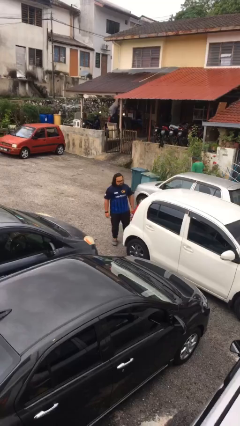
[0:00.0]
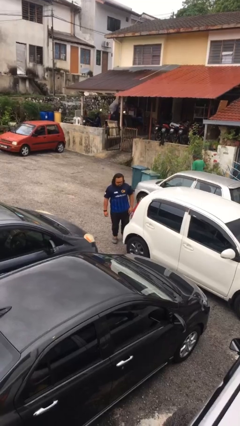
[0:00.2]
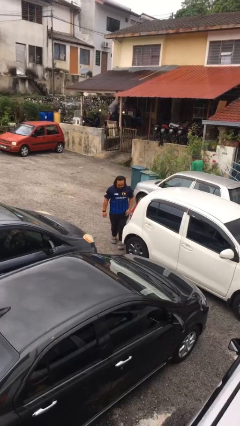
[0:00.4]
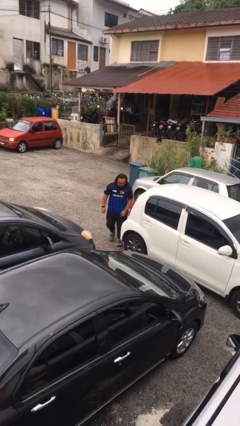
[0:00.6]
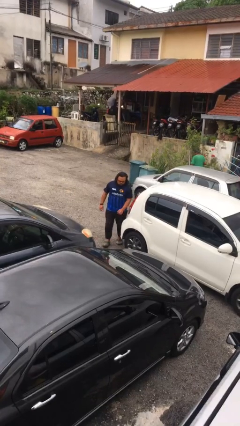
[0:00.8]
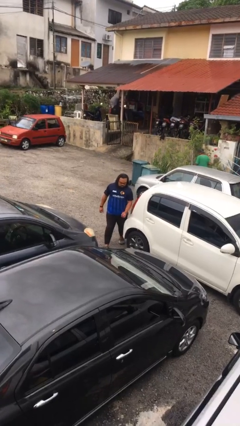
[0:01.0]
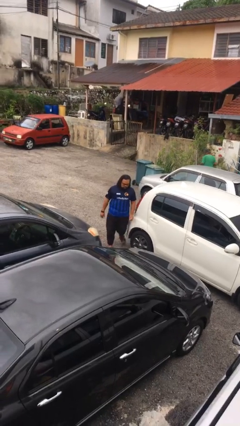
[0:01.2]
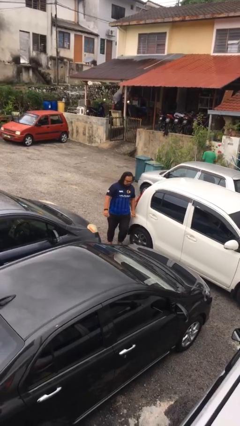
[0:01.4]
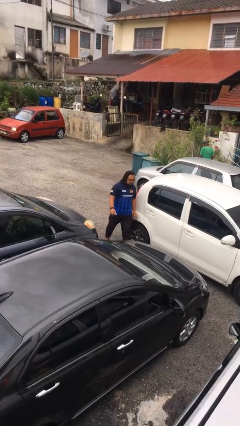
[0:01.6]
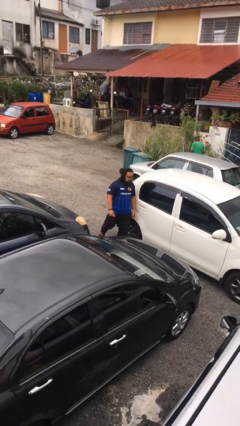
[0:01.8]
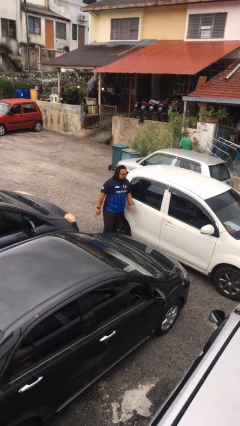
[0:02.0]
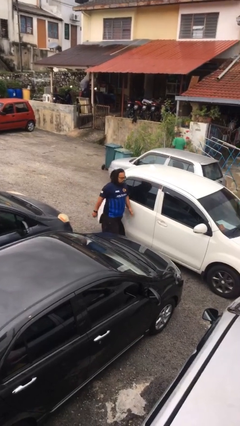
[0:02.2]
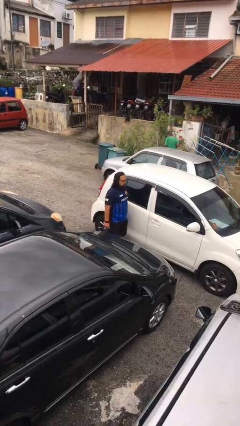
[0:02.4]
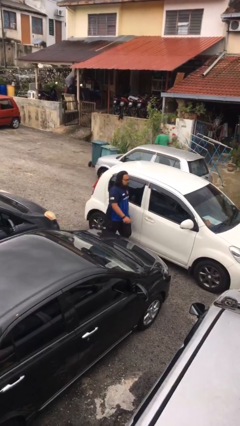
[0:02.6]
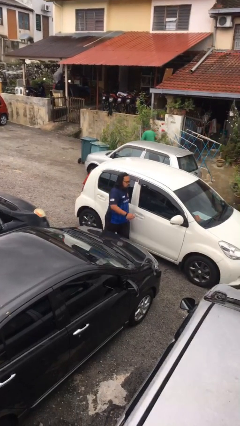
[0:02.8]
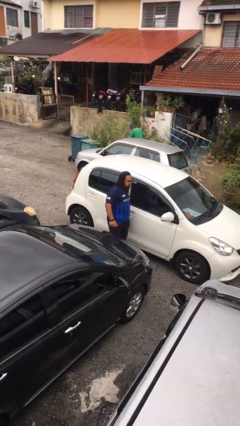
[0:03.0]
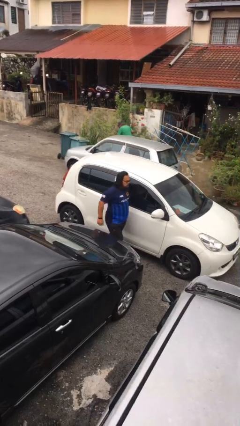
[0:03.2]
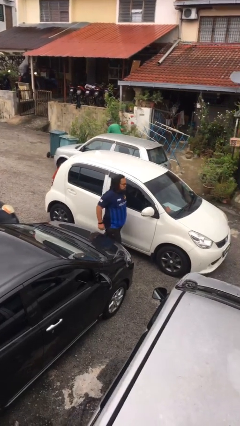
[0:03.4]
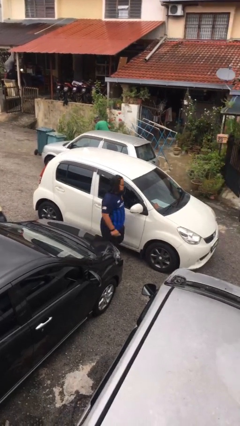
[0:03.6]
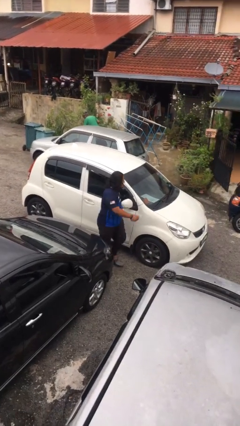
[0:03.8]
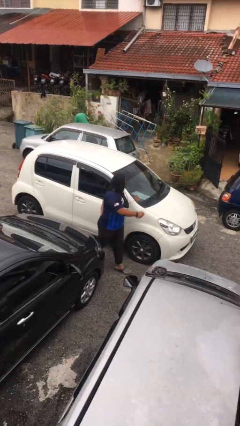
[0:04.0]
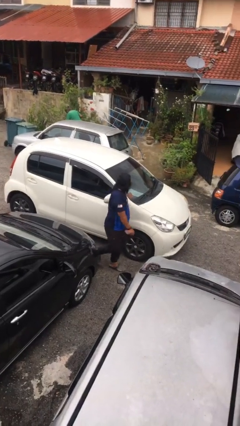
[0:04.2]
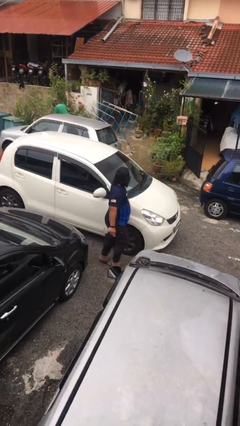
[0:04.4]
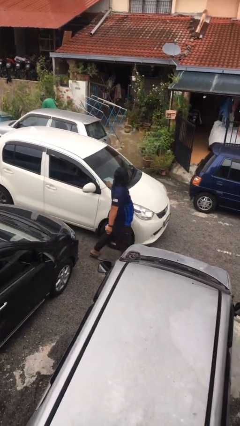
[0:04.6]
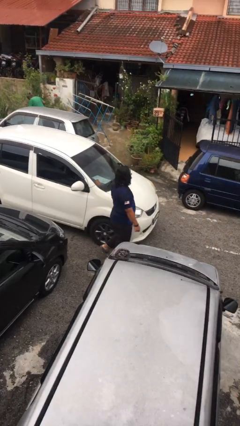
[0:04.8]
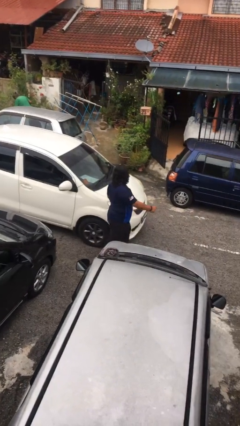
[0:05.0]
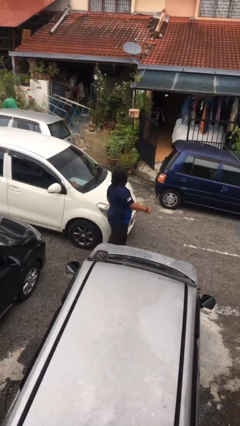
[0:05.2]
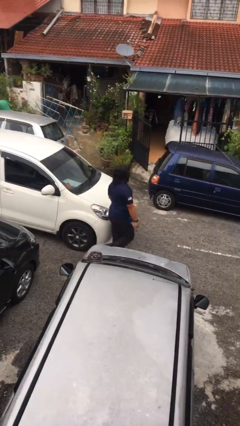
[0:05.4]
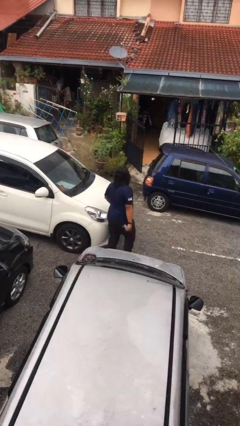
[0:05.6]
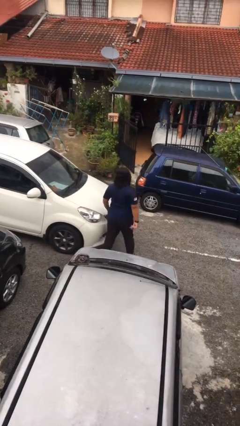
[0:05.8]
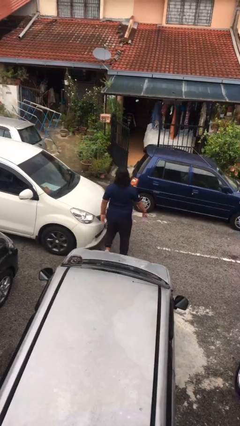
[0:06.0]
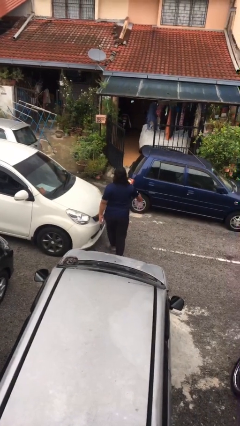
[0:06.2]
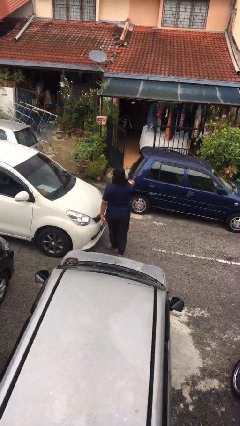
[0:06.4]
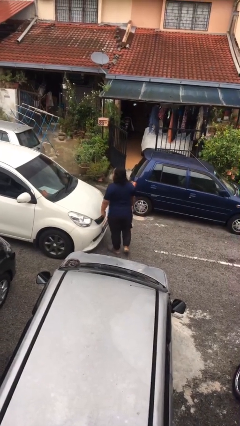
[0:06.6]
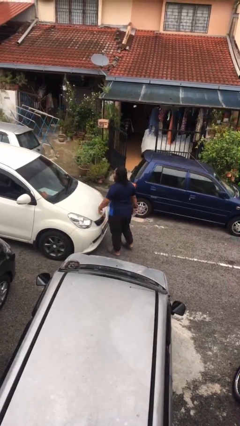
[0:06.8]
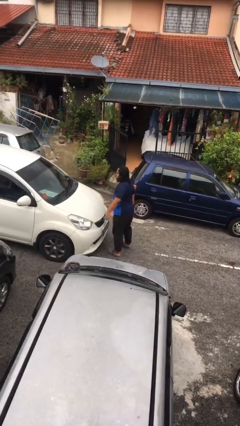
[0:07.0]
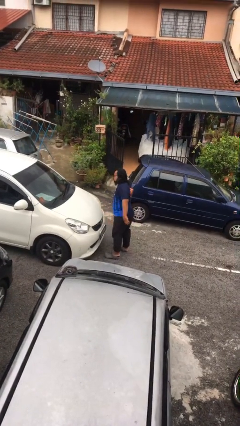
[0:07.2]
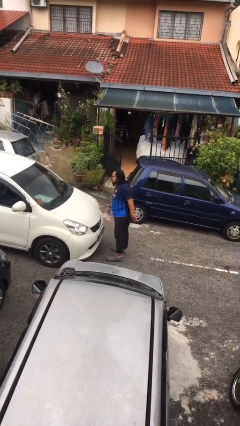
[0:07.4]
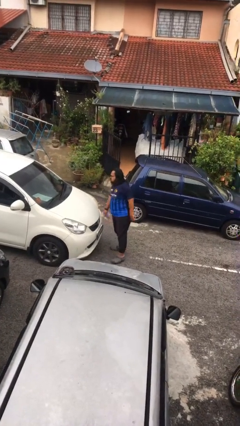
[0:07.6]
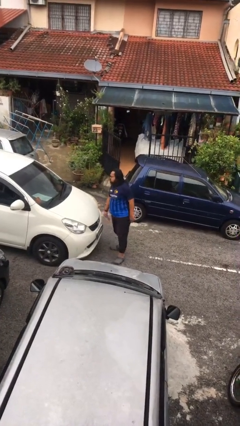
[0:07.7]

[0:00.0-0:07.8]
person walks around car

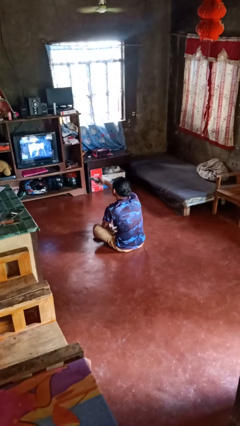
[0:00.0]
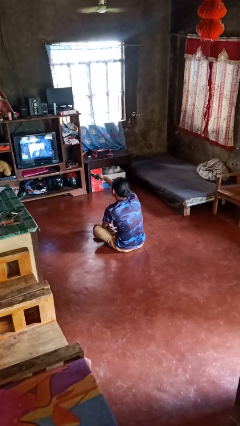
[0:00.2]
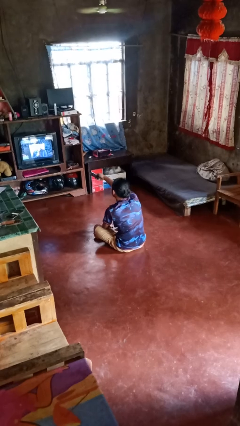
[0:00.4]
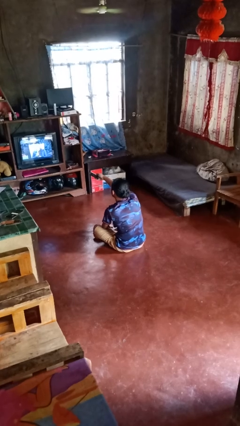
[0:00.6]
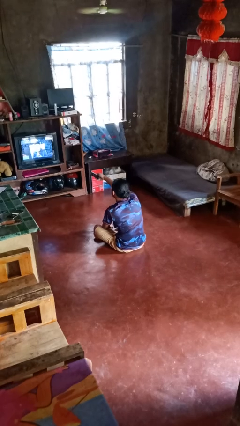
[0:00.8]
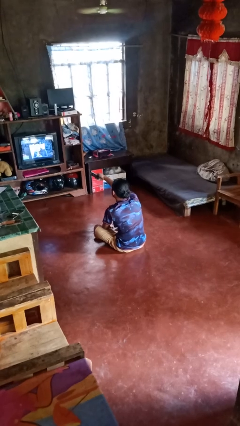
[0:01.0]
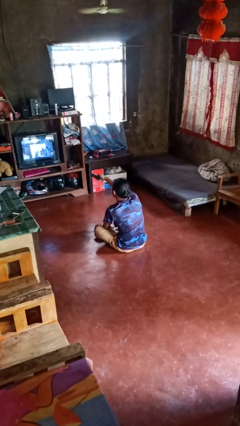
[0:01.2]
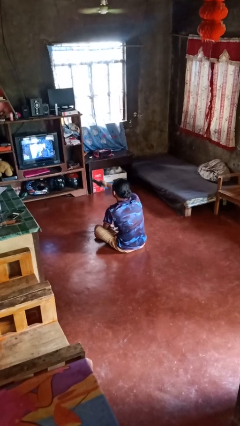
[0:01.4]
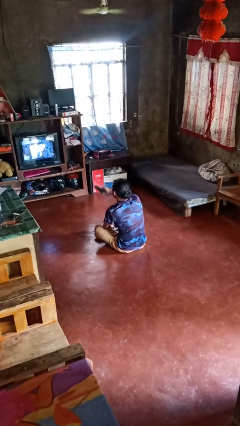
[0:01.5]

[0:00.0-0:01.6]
person uses television remote

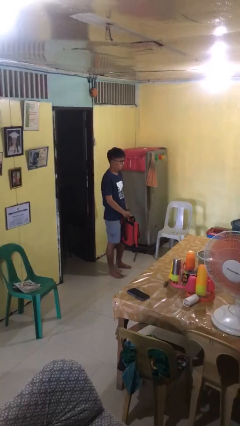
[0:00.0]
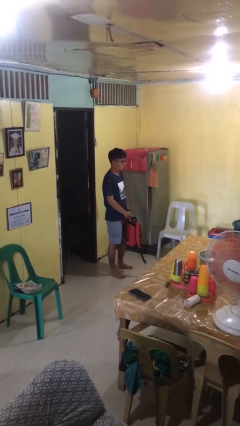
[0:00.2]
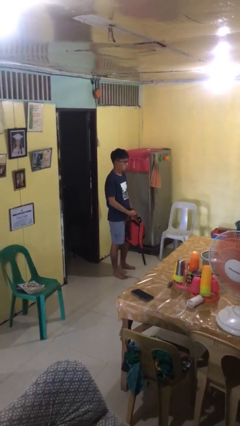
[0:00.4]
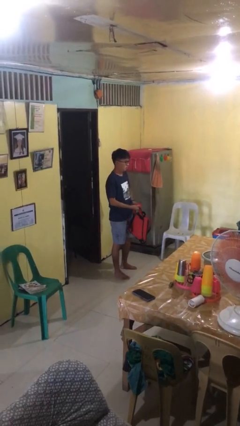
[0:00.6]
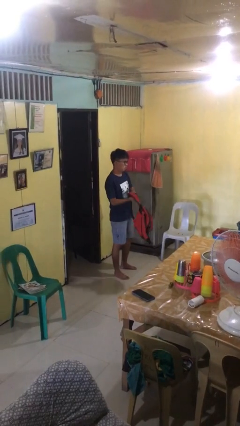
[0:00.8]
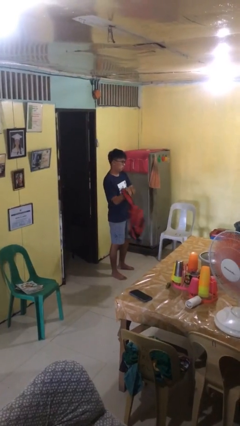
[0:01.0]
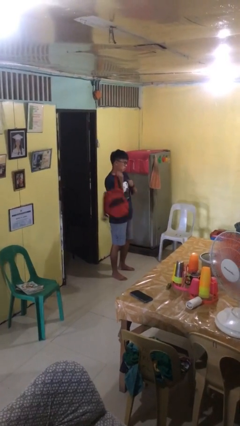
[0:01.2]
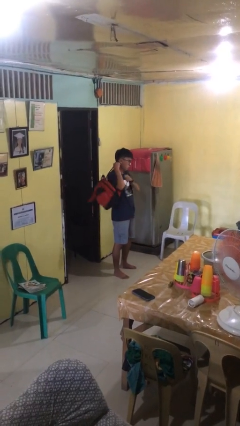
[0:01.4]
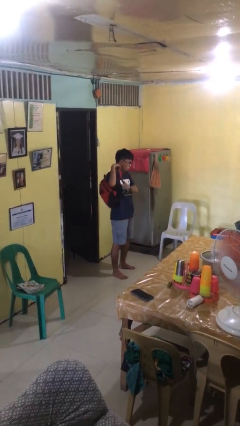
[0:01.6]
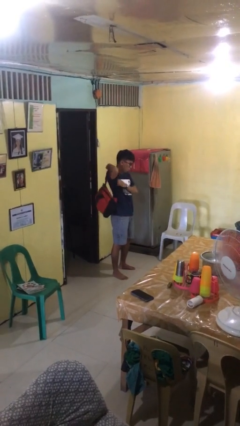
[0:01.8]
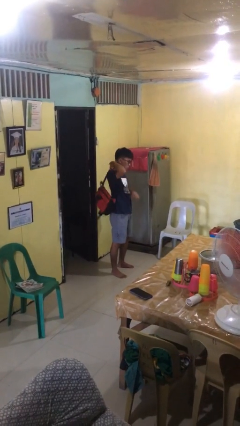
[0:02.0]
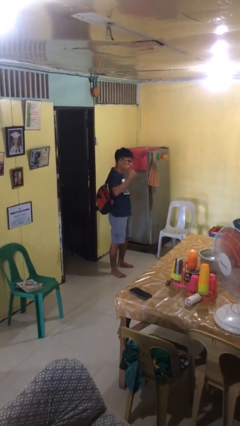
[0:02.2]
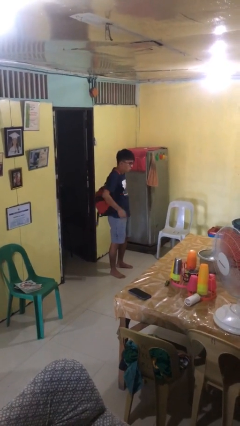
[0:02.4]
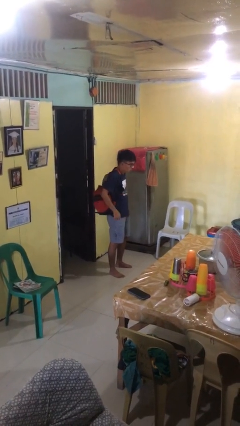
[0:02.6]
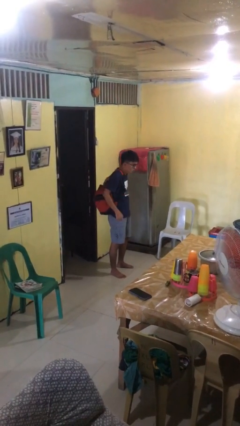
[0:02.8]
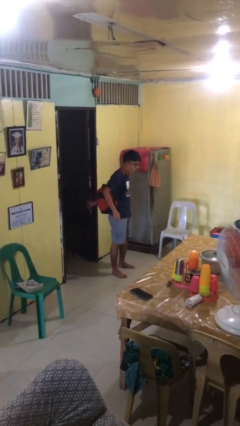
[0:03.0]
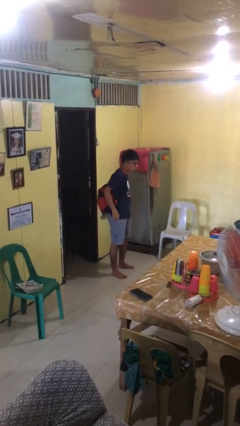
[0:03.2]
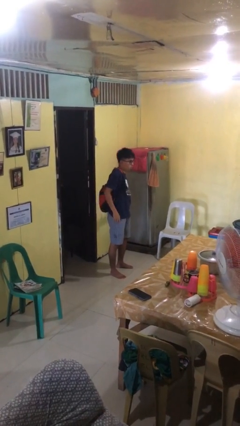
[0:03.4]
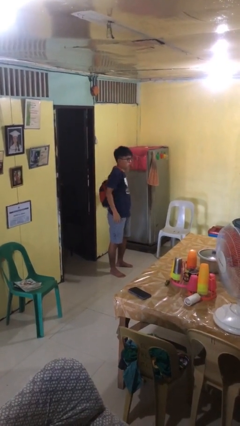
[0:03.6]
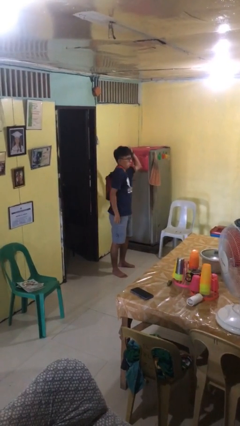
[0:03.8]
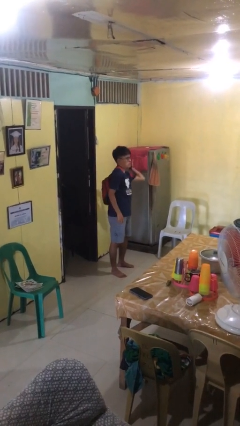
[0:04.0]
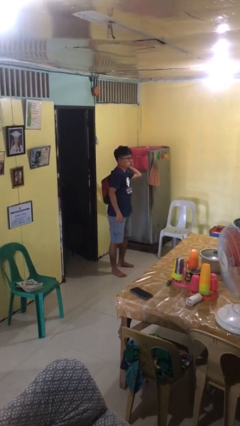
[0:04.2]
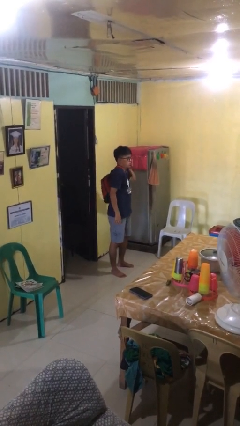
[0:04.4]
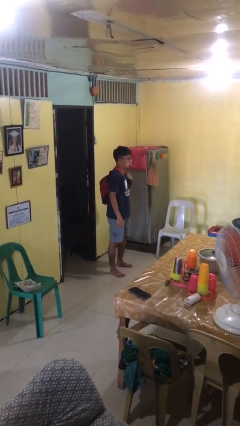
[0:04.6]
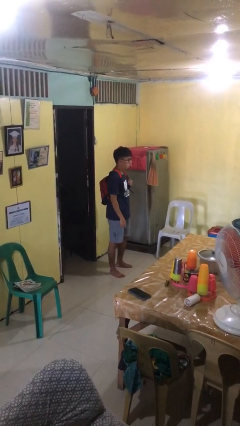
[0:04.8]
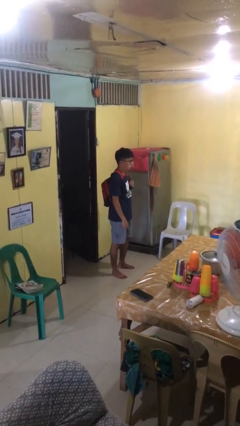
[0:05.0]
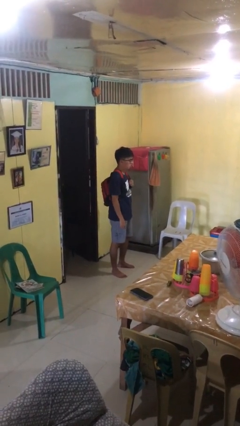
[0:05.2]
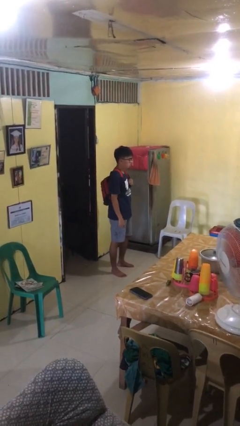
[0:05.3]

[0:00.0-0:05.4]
person puts on backpack

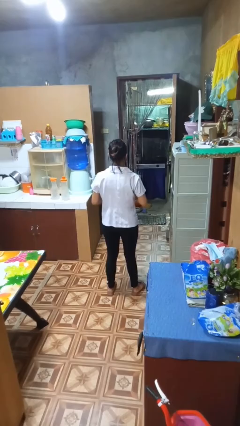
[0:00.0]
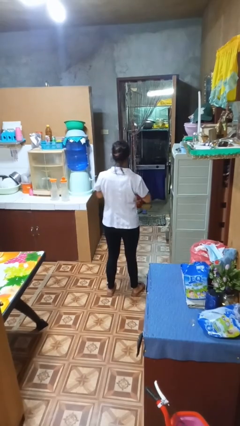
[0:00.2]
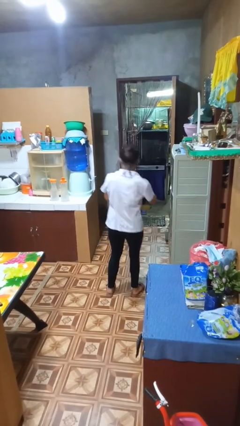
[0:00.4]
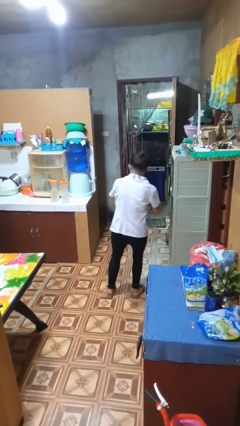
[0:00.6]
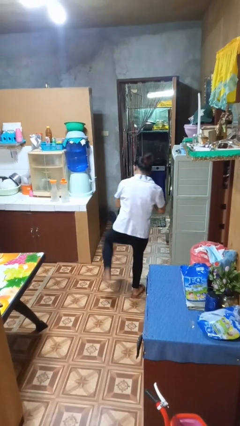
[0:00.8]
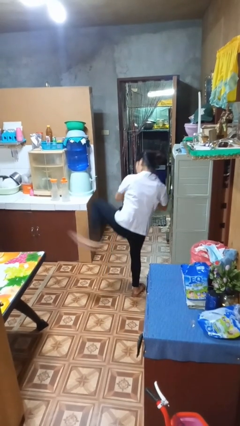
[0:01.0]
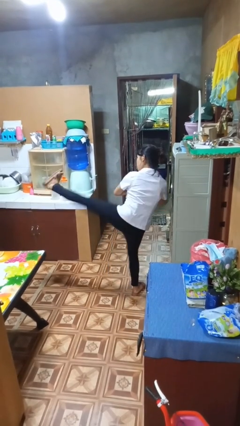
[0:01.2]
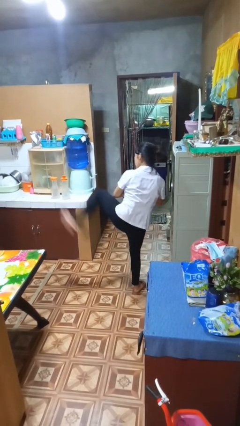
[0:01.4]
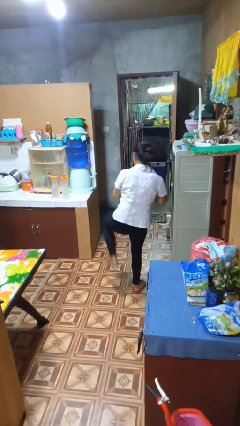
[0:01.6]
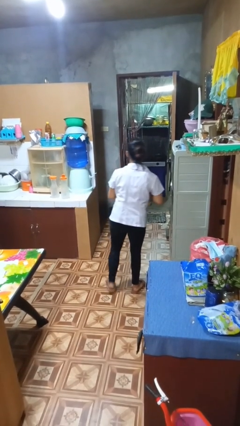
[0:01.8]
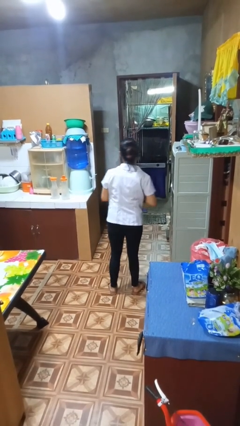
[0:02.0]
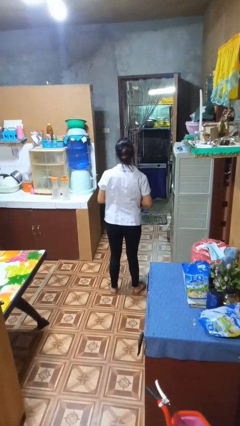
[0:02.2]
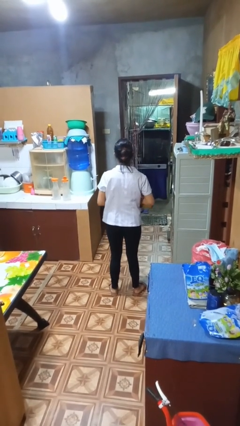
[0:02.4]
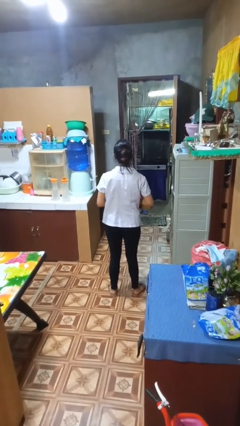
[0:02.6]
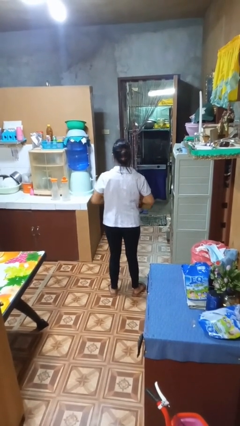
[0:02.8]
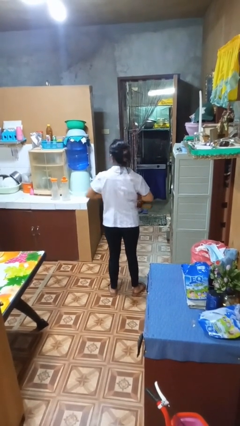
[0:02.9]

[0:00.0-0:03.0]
person karate kicks
